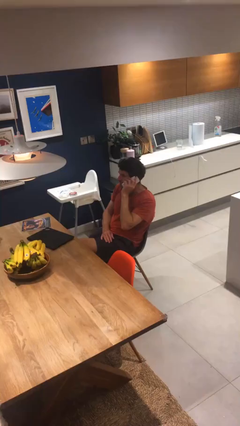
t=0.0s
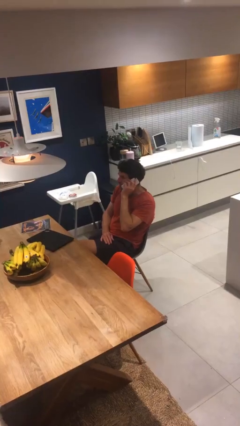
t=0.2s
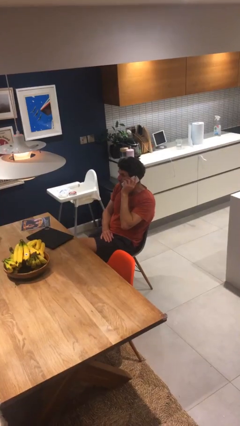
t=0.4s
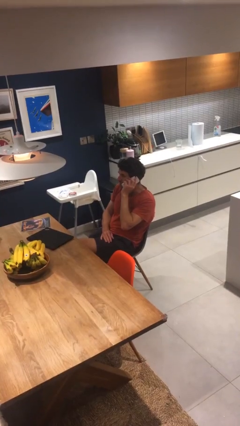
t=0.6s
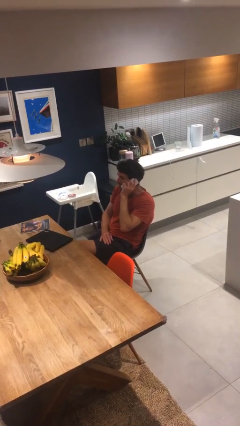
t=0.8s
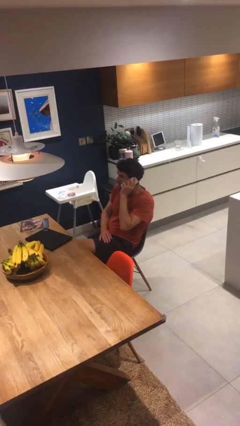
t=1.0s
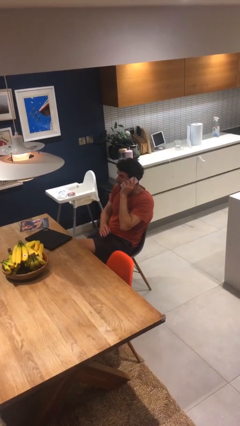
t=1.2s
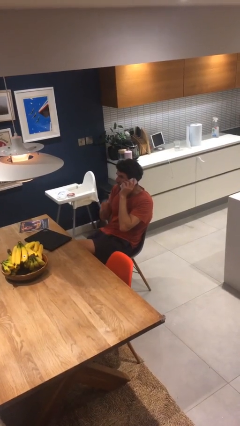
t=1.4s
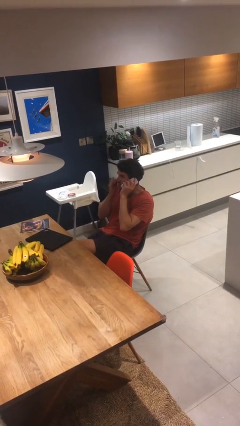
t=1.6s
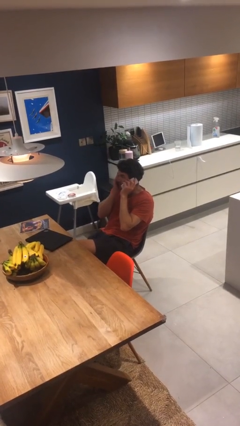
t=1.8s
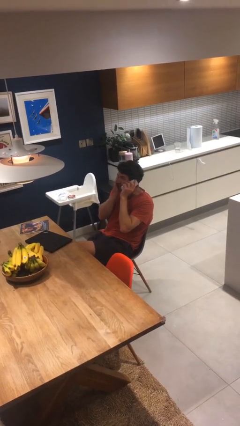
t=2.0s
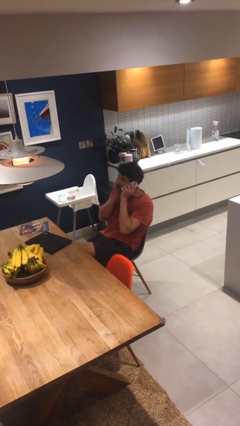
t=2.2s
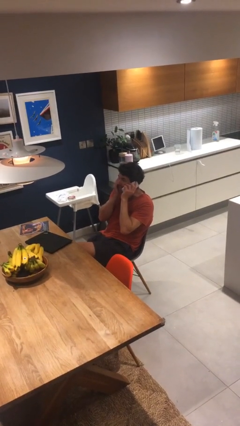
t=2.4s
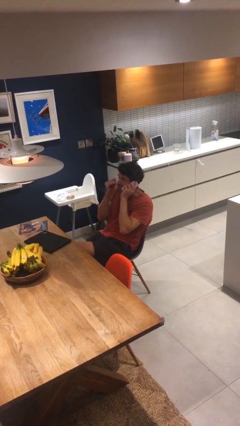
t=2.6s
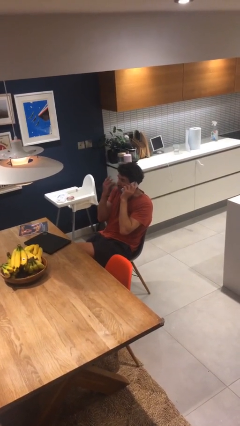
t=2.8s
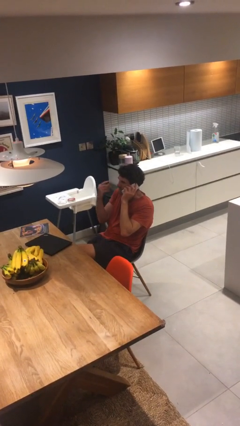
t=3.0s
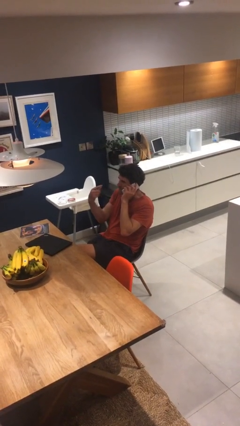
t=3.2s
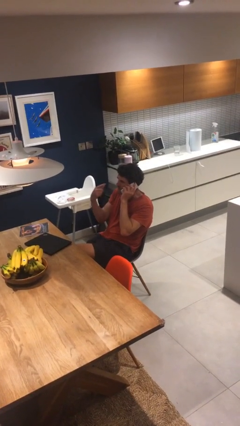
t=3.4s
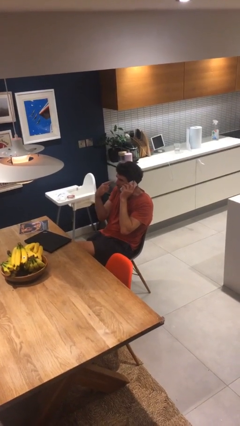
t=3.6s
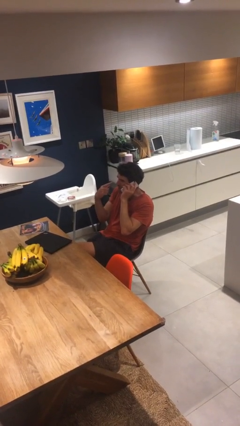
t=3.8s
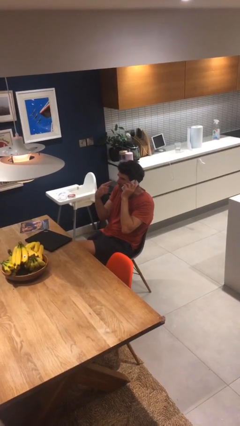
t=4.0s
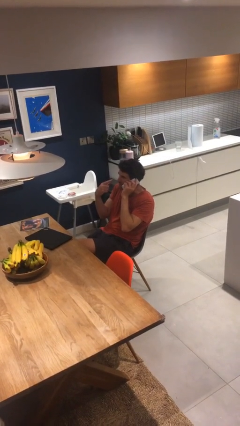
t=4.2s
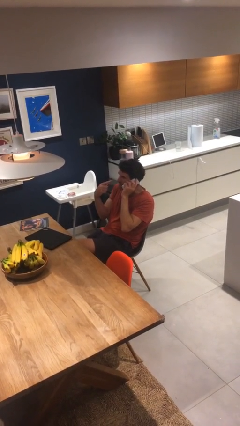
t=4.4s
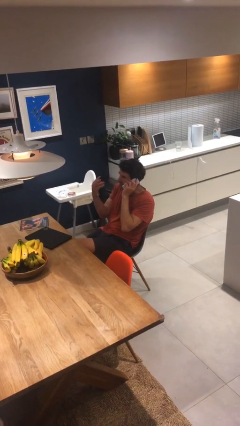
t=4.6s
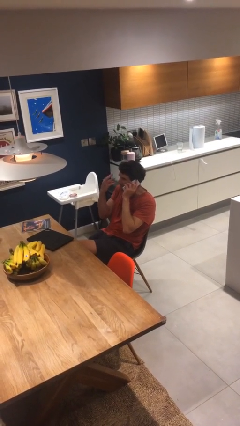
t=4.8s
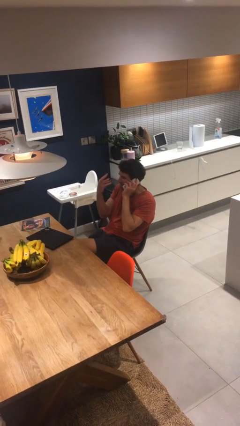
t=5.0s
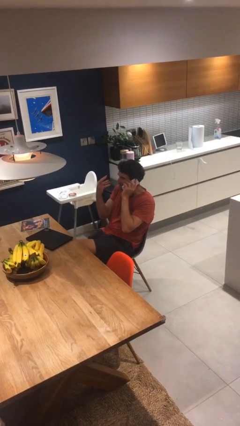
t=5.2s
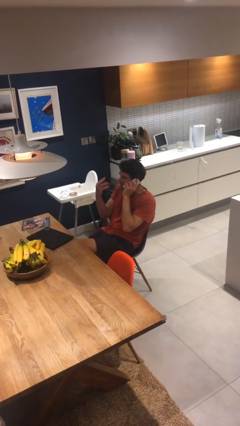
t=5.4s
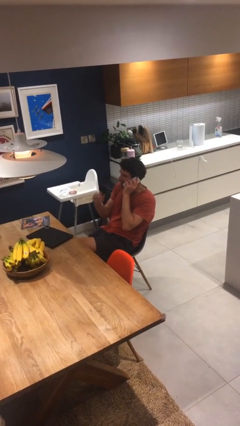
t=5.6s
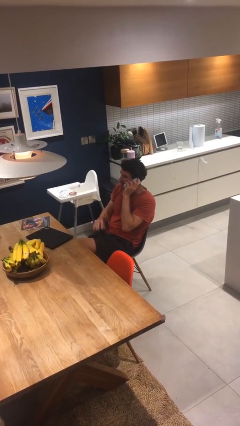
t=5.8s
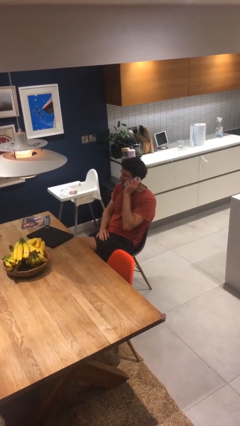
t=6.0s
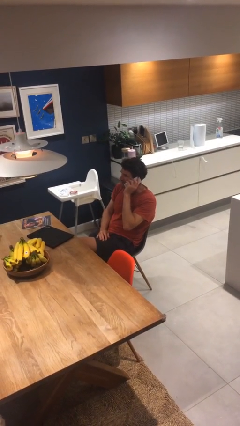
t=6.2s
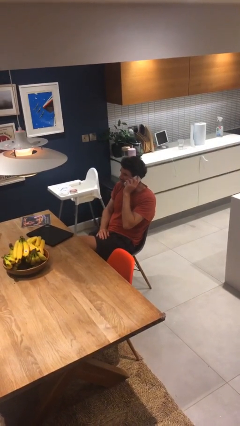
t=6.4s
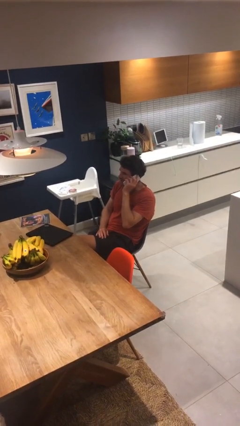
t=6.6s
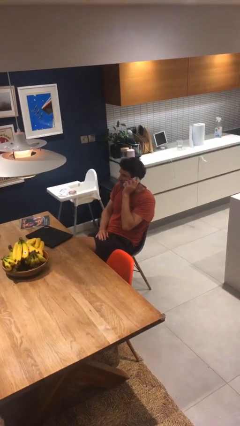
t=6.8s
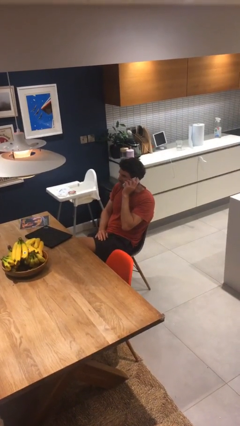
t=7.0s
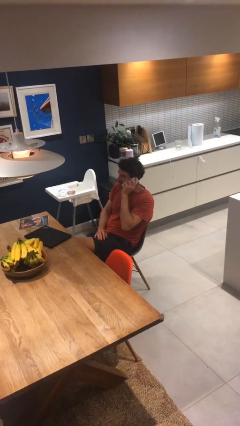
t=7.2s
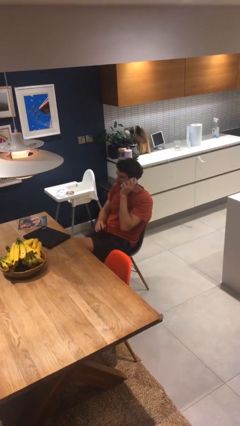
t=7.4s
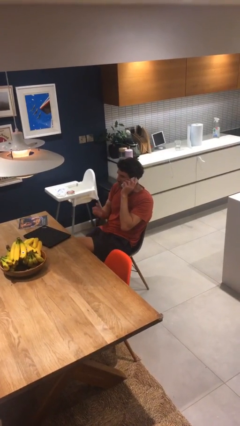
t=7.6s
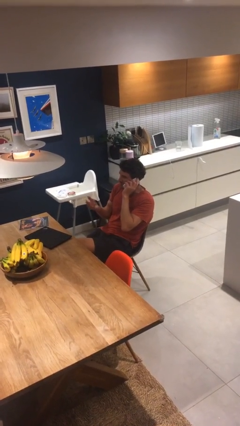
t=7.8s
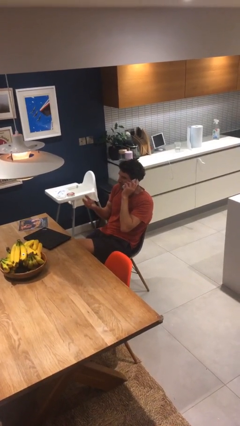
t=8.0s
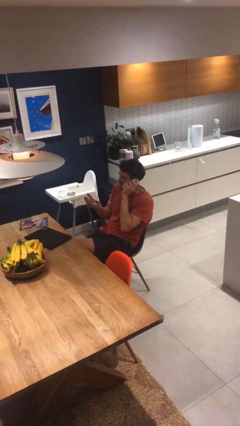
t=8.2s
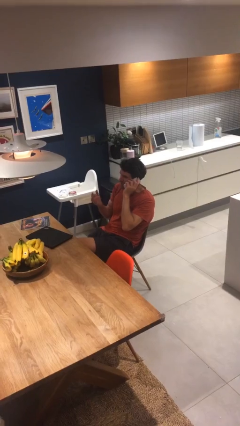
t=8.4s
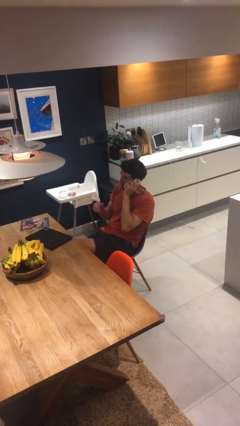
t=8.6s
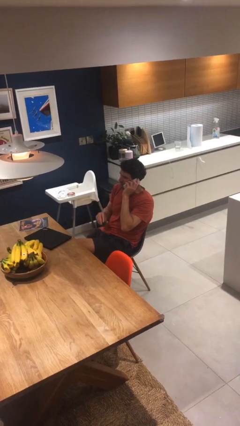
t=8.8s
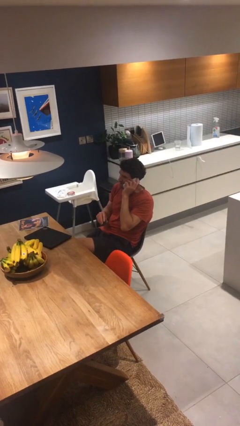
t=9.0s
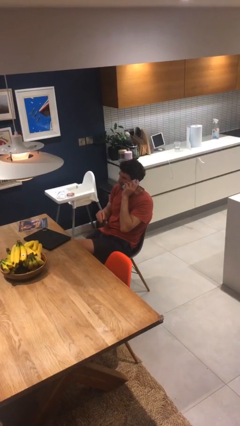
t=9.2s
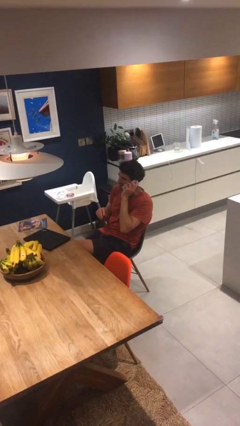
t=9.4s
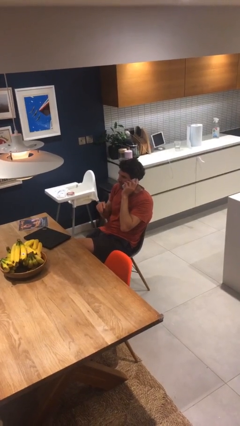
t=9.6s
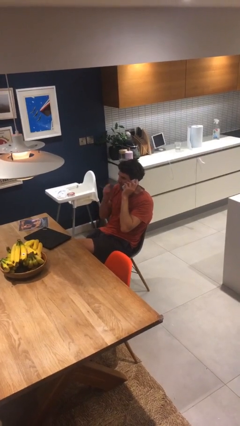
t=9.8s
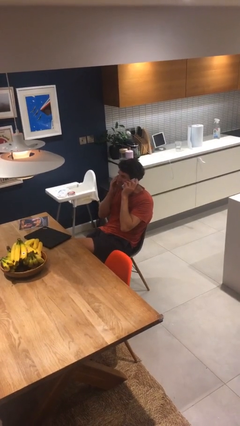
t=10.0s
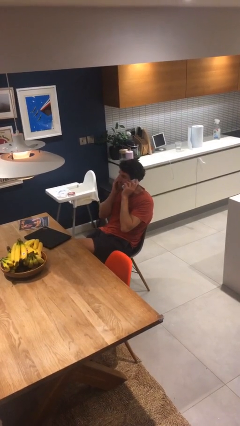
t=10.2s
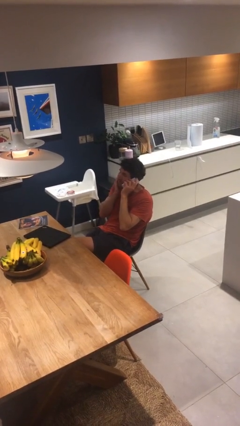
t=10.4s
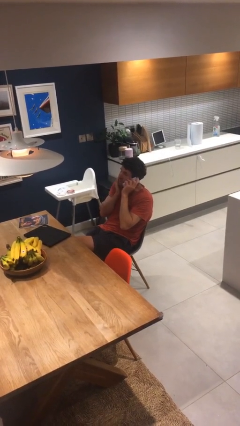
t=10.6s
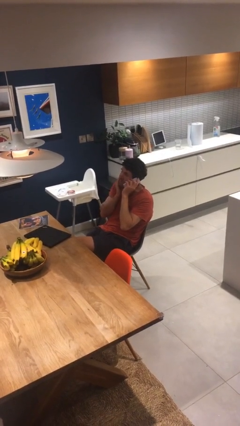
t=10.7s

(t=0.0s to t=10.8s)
person talks on phone

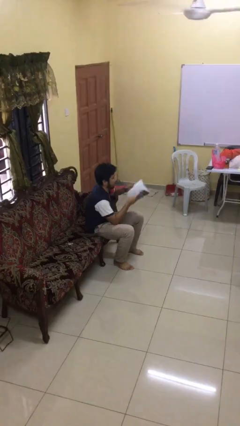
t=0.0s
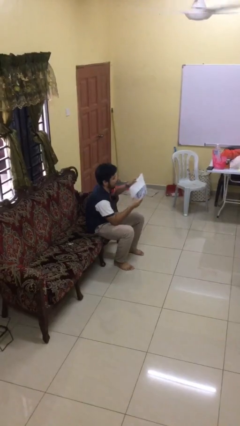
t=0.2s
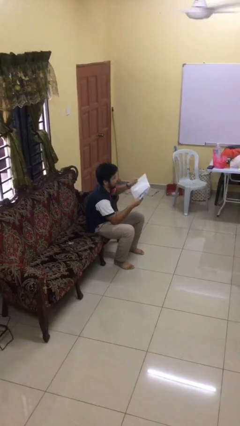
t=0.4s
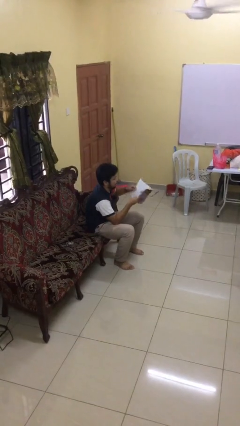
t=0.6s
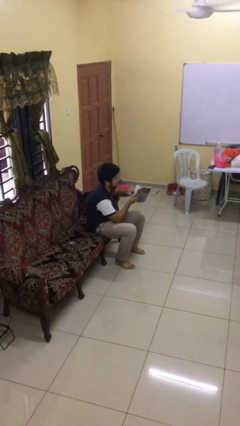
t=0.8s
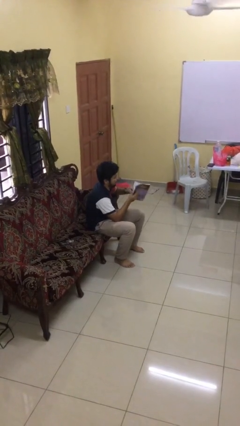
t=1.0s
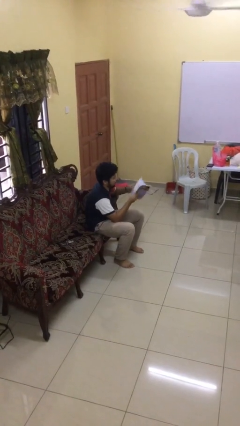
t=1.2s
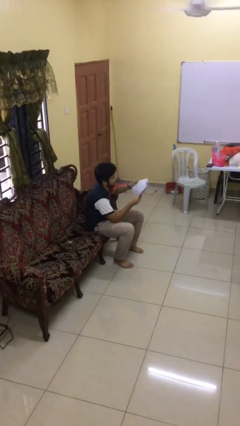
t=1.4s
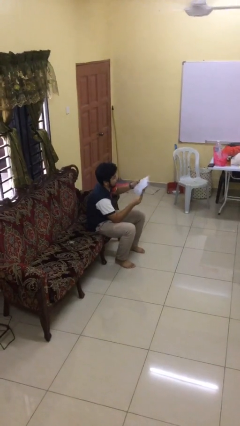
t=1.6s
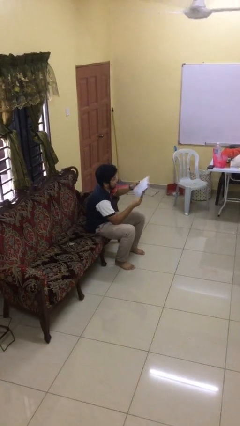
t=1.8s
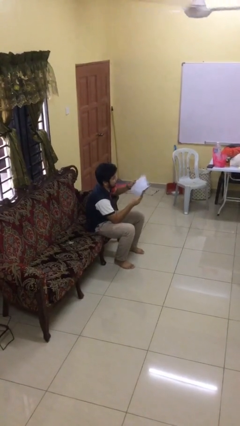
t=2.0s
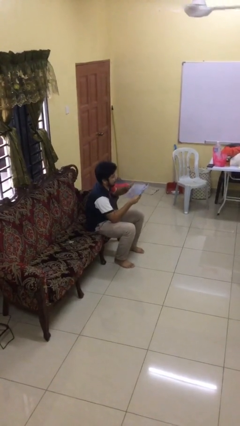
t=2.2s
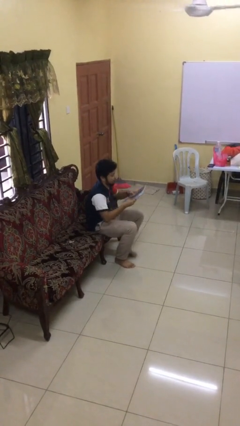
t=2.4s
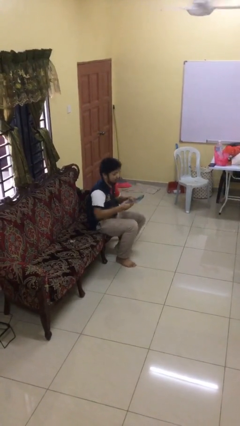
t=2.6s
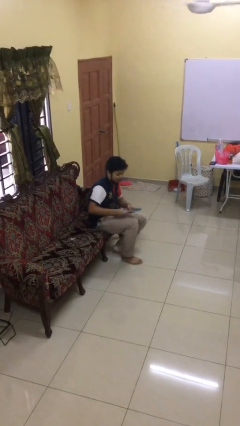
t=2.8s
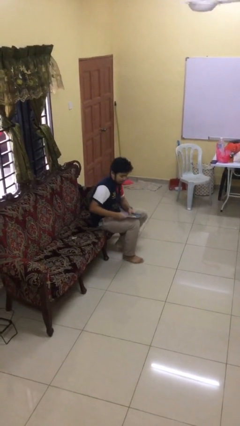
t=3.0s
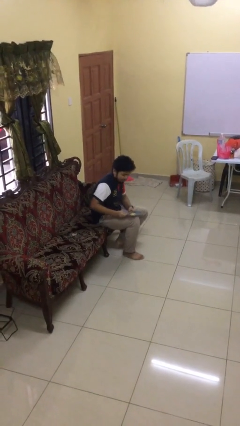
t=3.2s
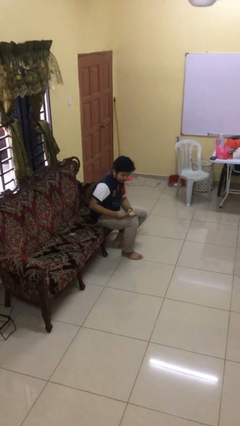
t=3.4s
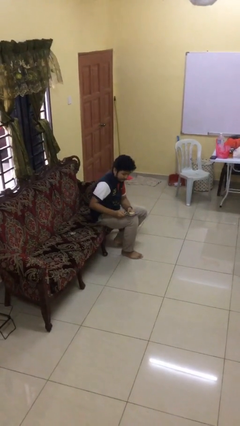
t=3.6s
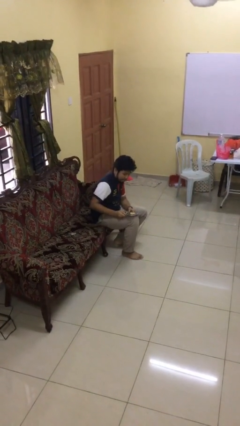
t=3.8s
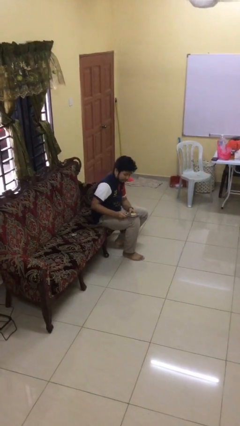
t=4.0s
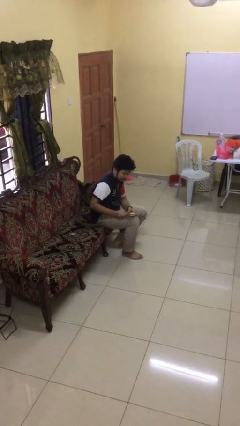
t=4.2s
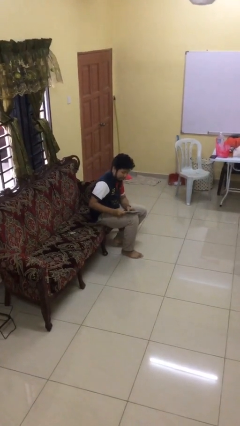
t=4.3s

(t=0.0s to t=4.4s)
person reads magazine

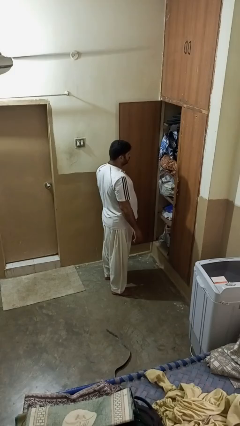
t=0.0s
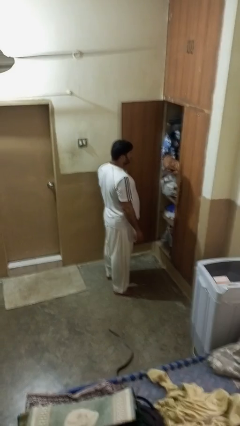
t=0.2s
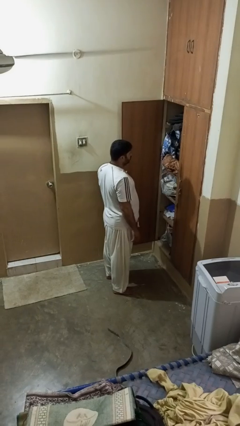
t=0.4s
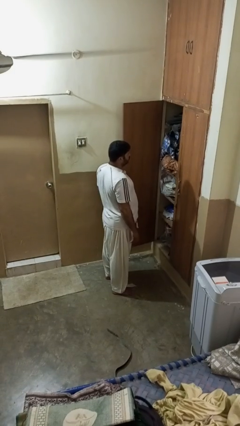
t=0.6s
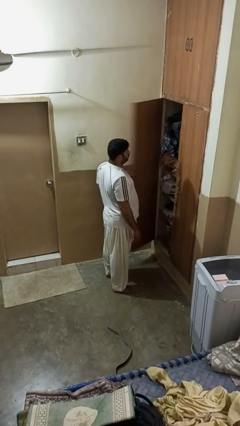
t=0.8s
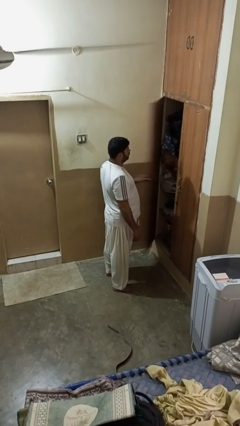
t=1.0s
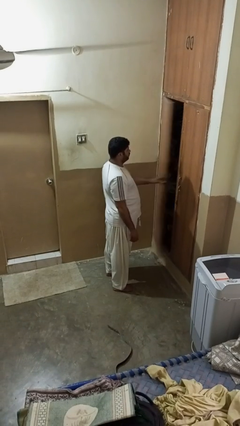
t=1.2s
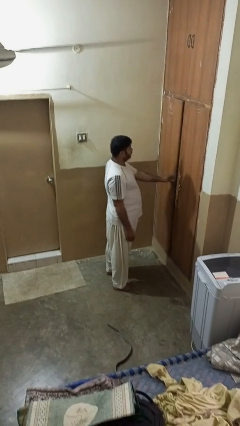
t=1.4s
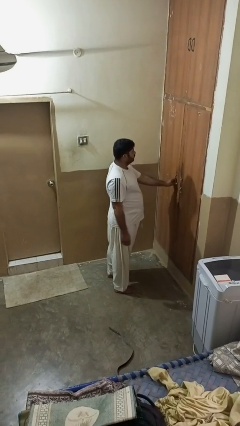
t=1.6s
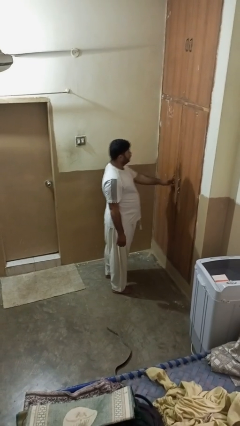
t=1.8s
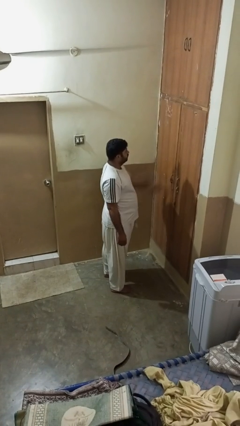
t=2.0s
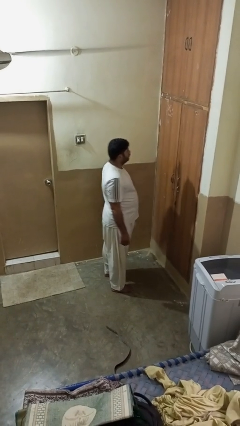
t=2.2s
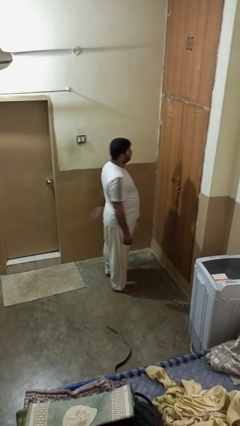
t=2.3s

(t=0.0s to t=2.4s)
person closes closet door

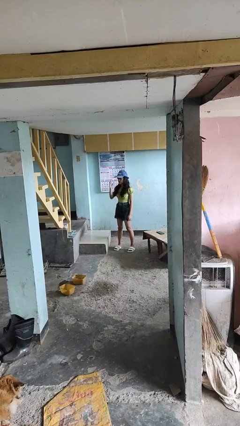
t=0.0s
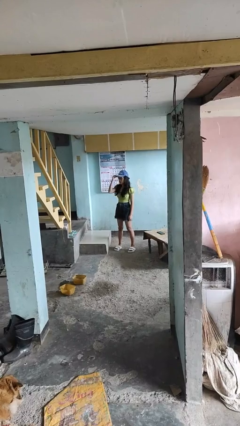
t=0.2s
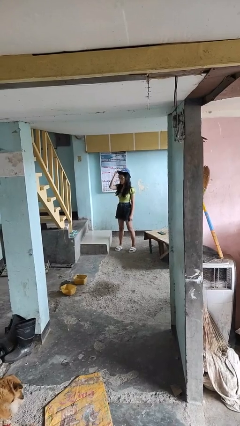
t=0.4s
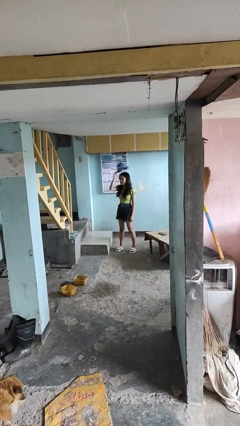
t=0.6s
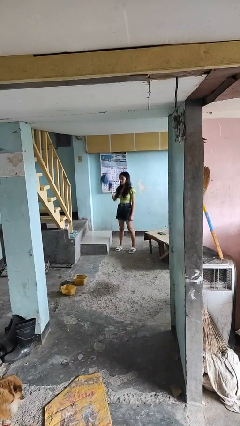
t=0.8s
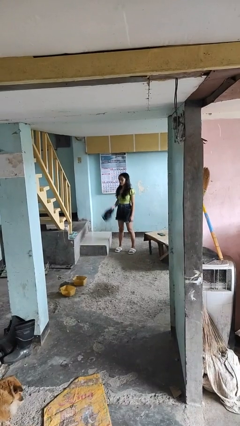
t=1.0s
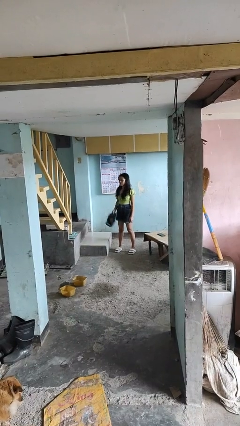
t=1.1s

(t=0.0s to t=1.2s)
person takes off hat
